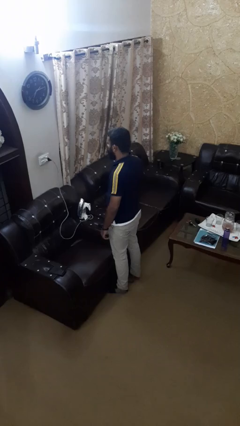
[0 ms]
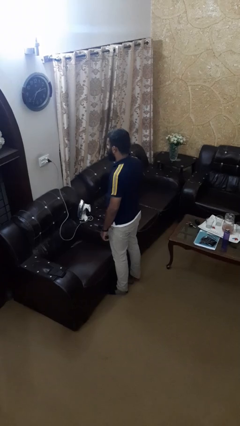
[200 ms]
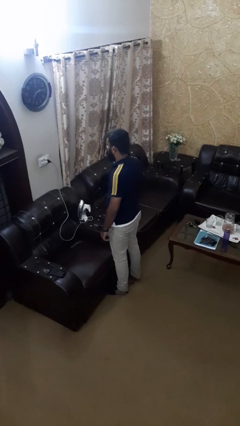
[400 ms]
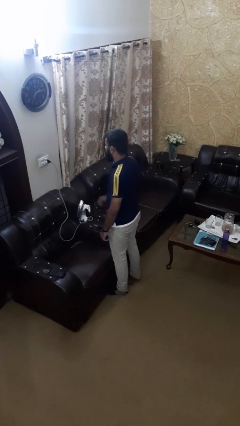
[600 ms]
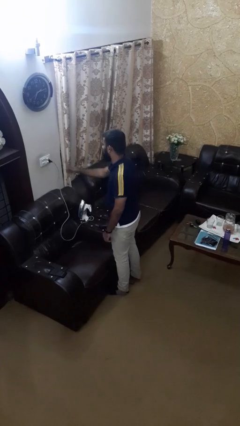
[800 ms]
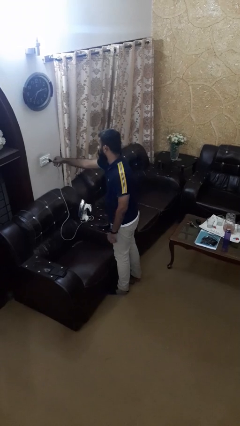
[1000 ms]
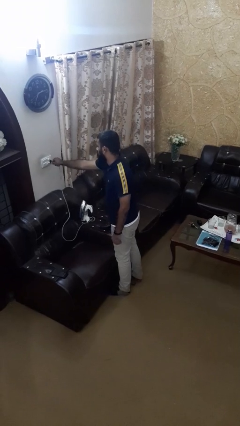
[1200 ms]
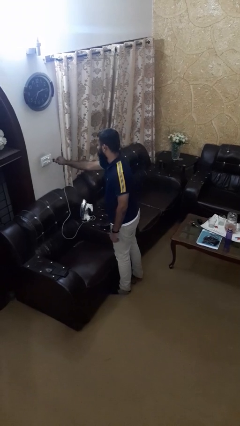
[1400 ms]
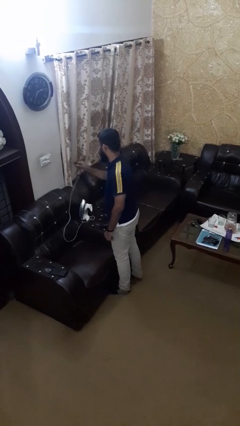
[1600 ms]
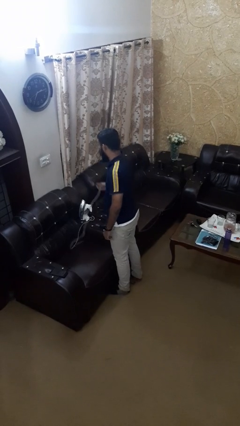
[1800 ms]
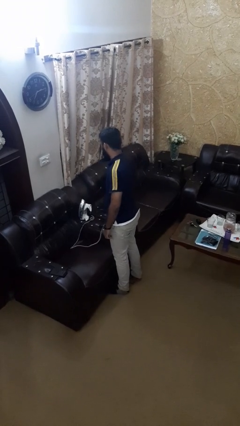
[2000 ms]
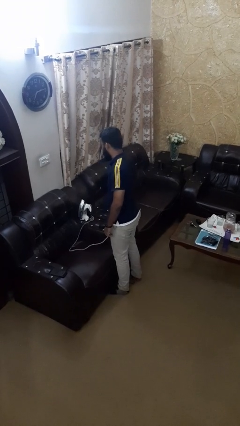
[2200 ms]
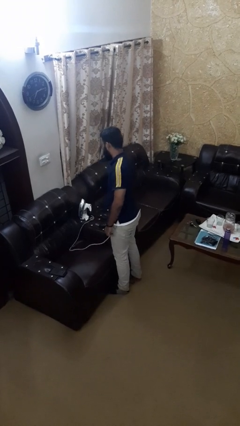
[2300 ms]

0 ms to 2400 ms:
person unplugs from electrical socket

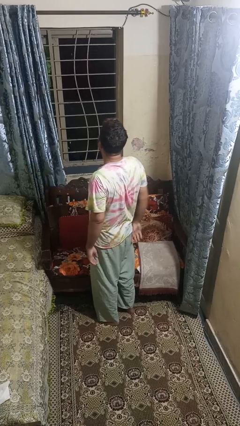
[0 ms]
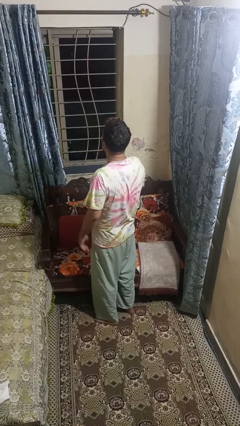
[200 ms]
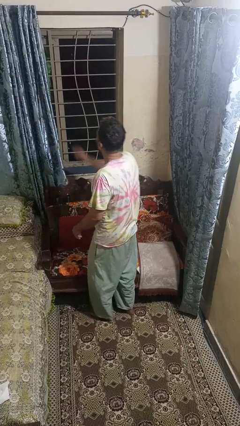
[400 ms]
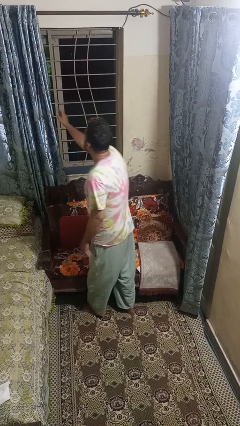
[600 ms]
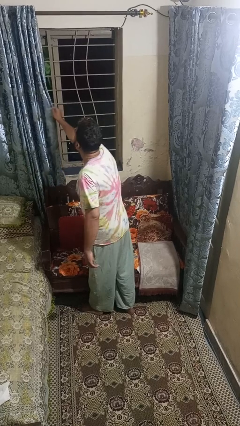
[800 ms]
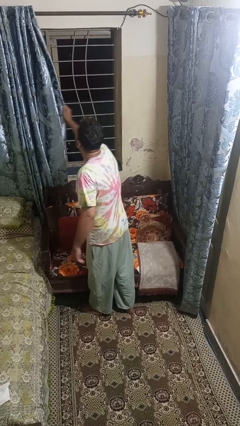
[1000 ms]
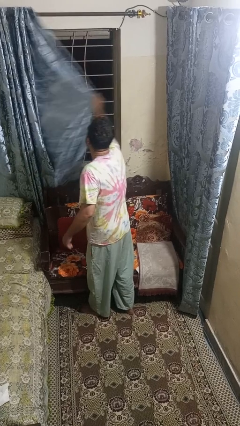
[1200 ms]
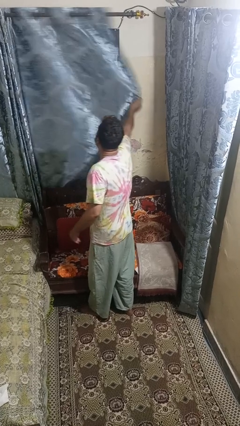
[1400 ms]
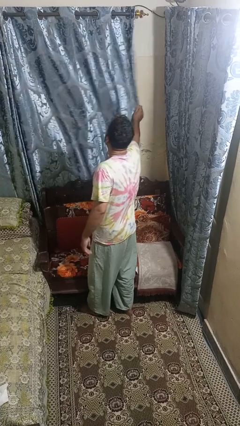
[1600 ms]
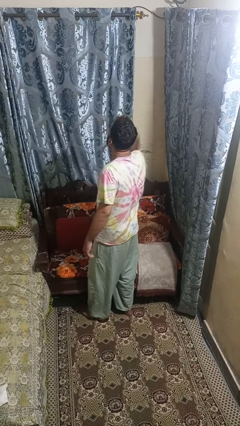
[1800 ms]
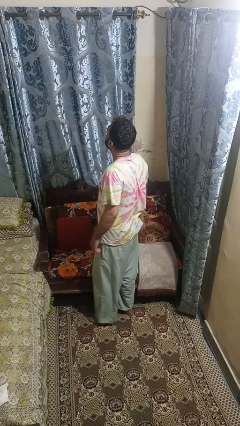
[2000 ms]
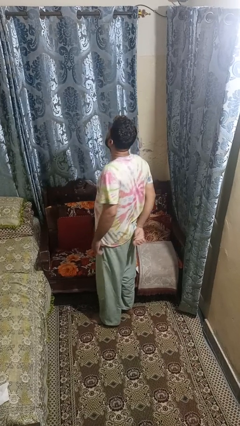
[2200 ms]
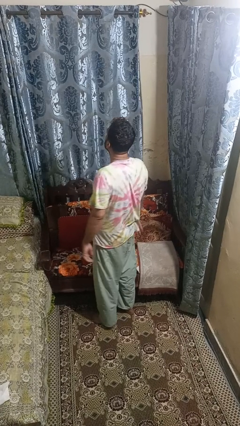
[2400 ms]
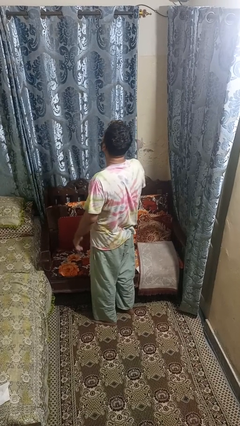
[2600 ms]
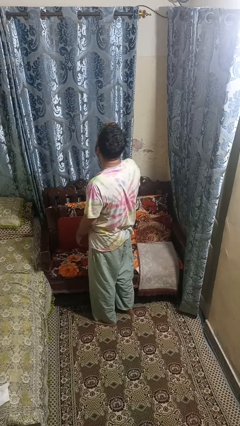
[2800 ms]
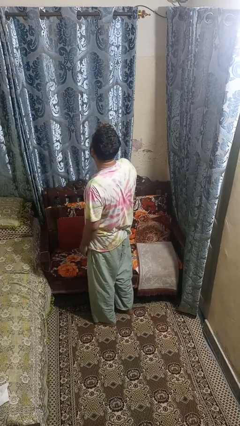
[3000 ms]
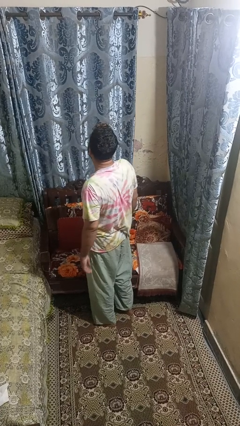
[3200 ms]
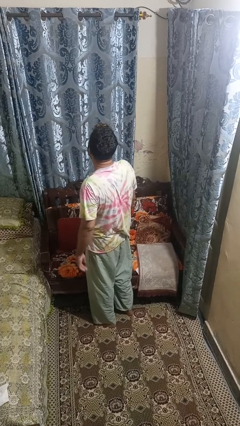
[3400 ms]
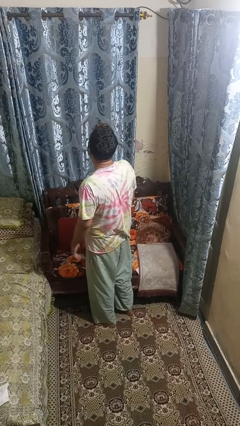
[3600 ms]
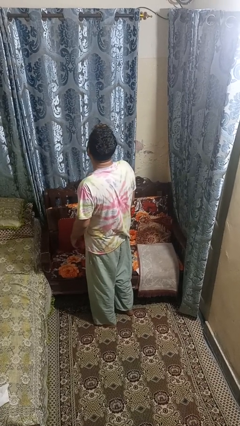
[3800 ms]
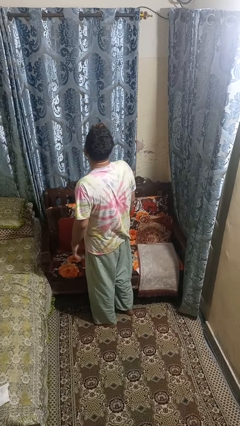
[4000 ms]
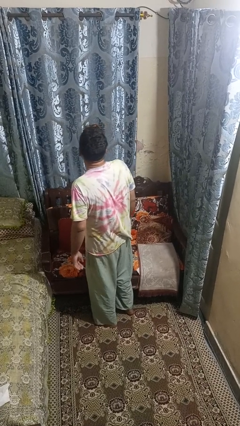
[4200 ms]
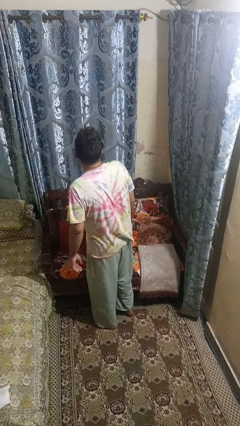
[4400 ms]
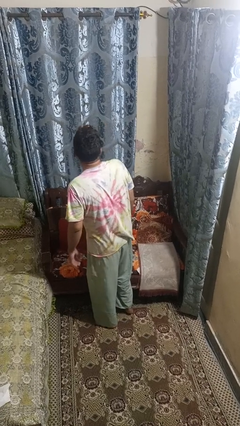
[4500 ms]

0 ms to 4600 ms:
person closes curtains

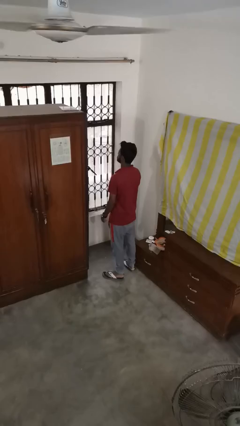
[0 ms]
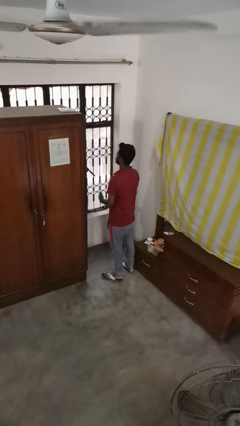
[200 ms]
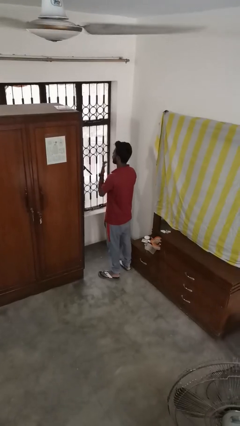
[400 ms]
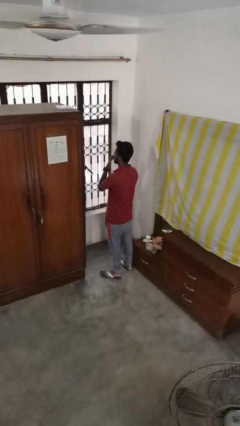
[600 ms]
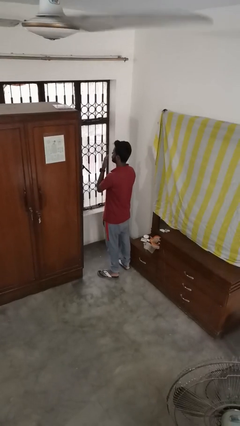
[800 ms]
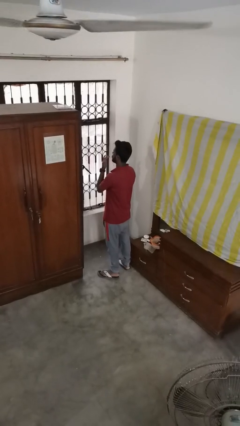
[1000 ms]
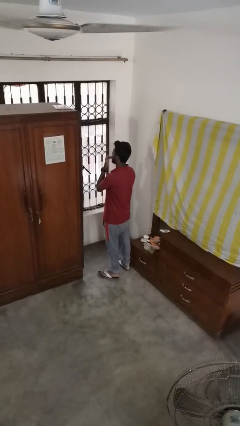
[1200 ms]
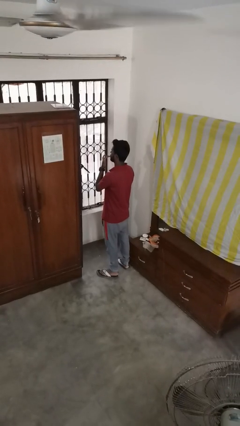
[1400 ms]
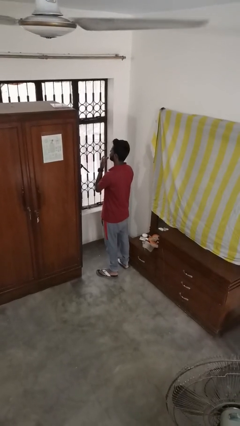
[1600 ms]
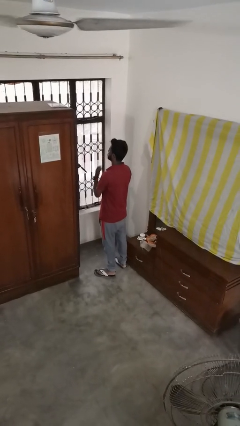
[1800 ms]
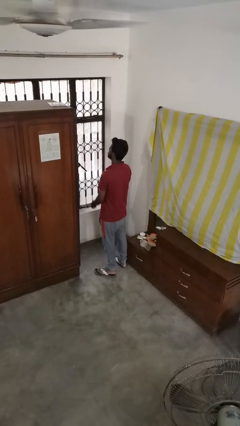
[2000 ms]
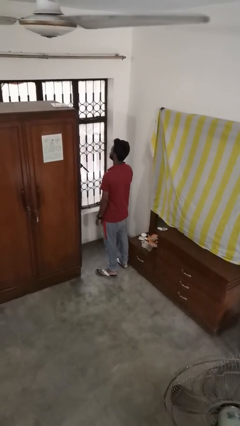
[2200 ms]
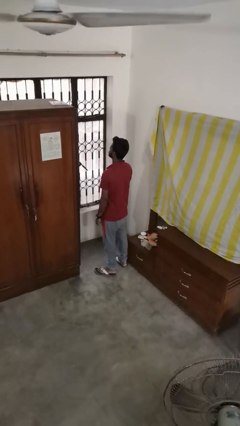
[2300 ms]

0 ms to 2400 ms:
person licks fingers

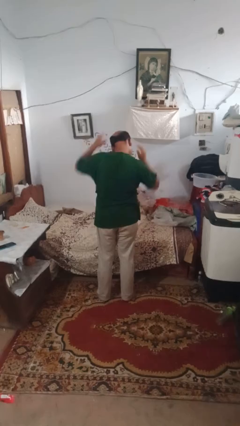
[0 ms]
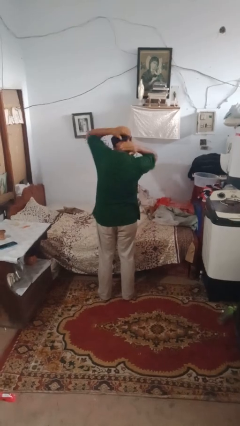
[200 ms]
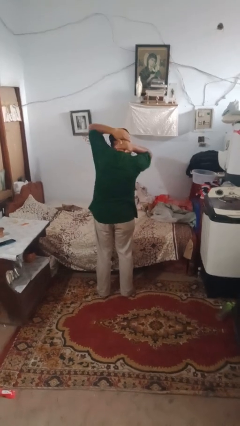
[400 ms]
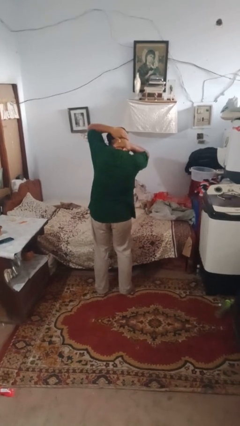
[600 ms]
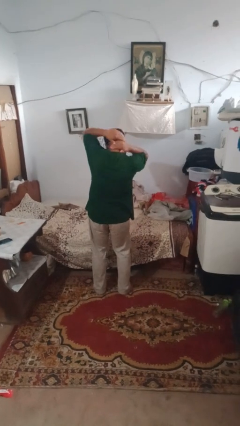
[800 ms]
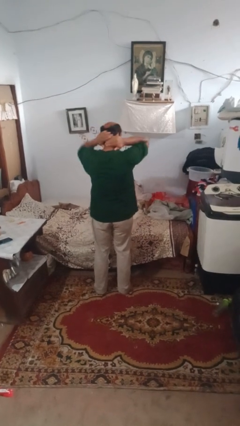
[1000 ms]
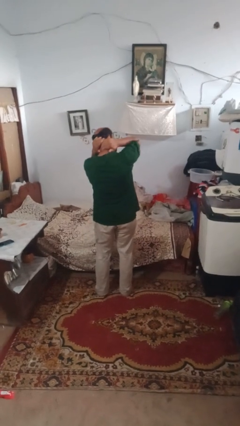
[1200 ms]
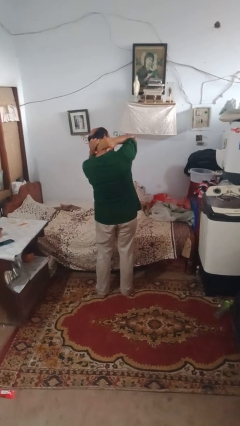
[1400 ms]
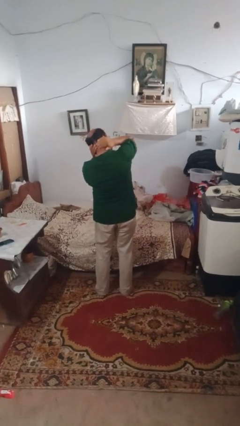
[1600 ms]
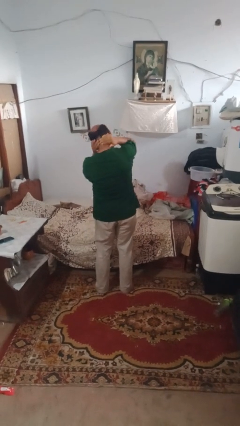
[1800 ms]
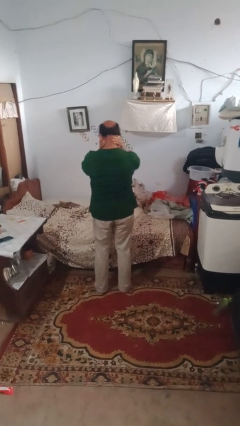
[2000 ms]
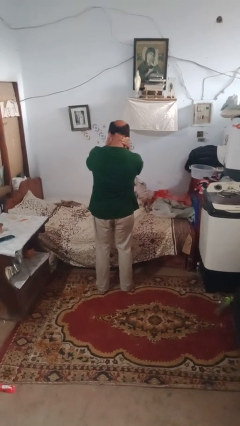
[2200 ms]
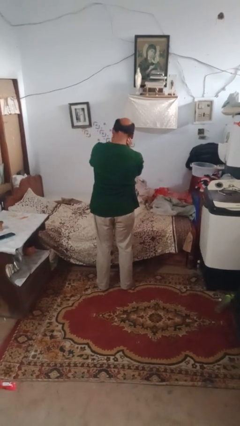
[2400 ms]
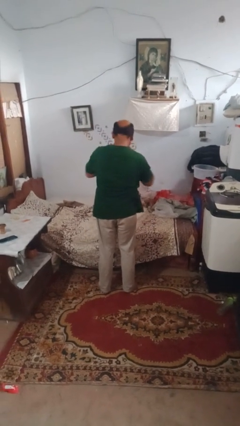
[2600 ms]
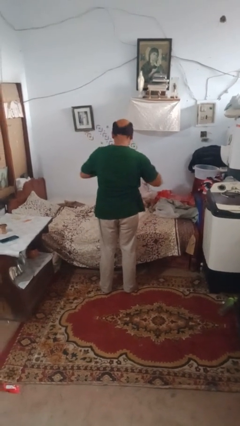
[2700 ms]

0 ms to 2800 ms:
person rubs neck

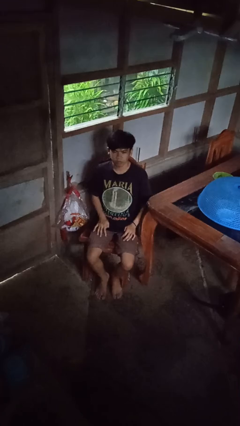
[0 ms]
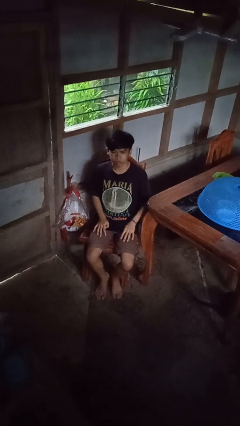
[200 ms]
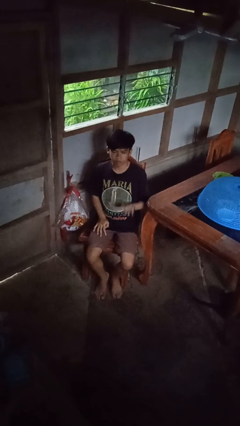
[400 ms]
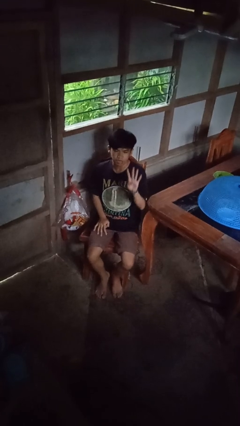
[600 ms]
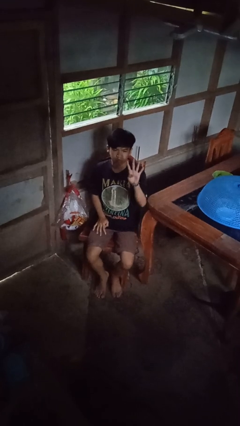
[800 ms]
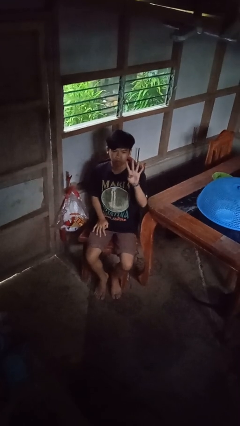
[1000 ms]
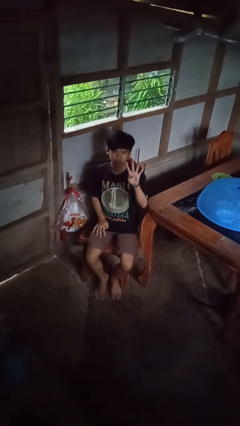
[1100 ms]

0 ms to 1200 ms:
person gestures number four

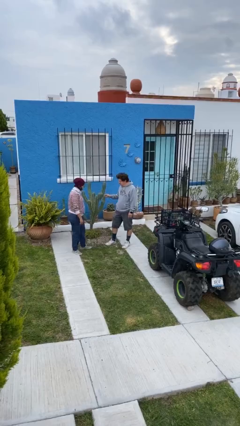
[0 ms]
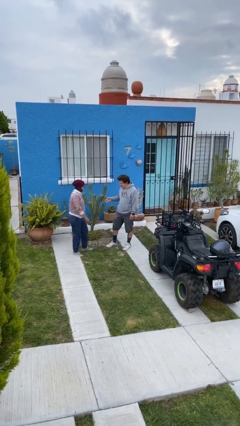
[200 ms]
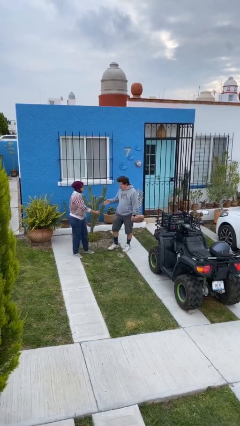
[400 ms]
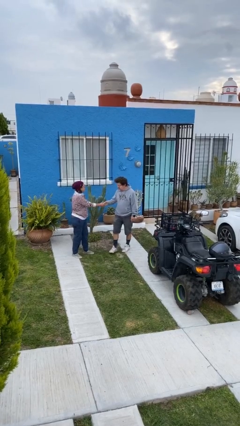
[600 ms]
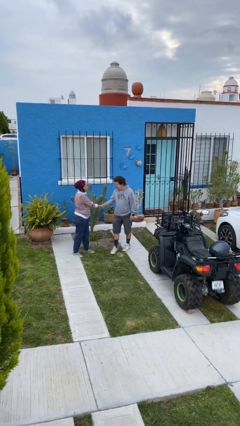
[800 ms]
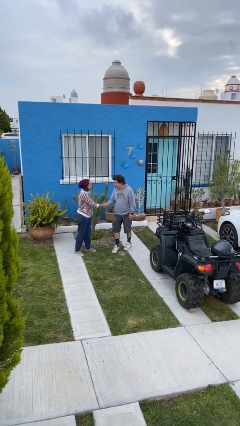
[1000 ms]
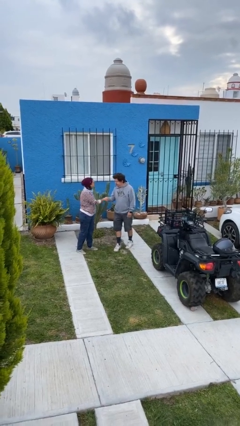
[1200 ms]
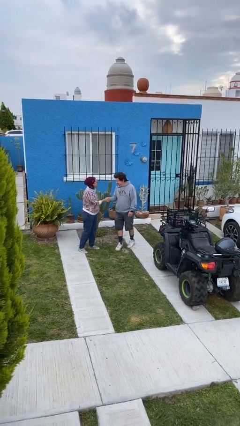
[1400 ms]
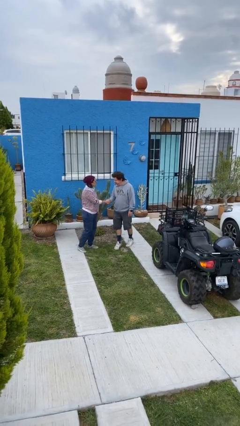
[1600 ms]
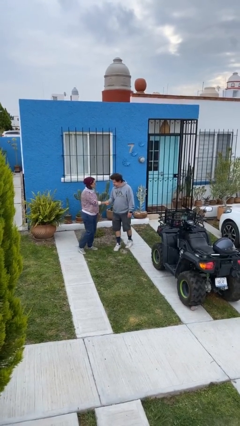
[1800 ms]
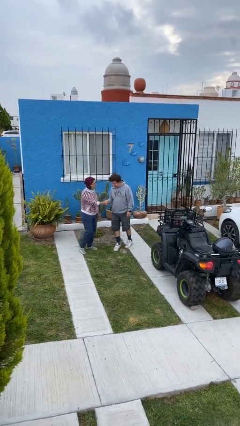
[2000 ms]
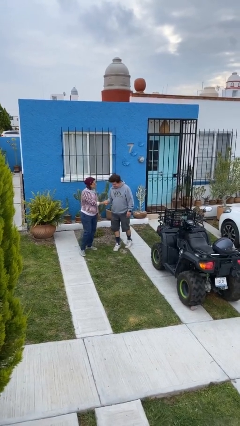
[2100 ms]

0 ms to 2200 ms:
person shakes hand

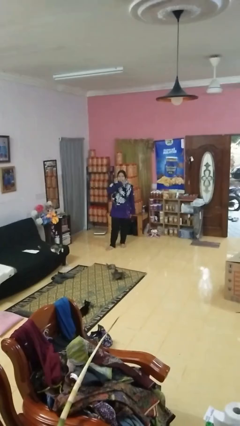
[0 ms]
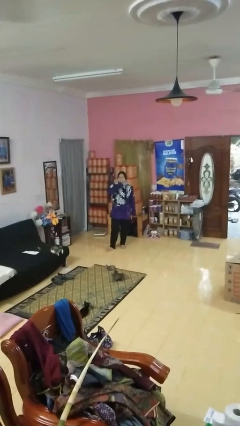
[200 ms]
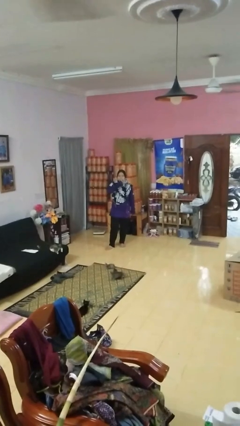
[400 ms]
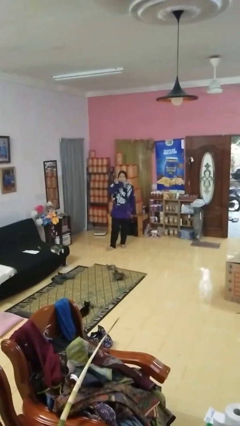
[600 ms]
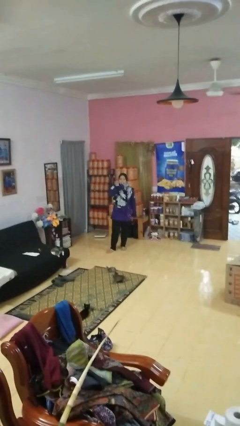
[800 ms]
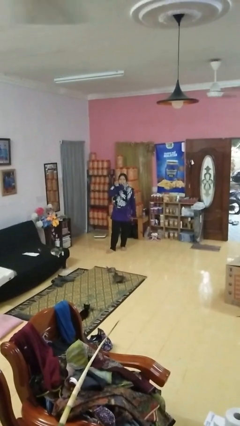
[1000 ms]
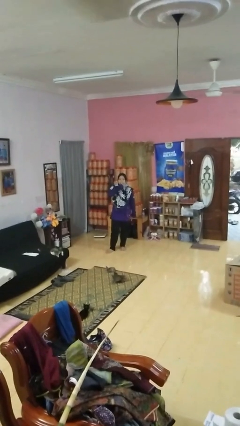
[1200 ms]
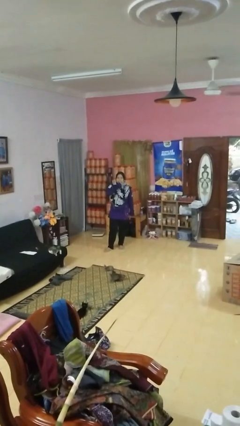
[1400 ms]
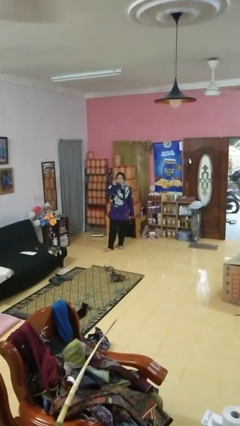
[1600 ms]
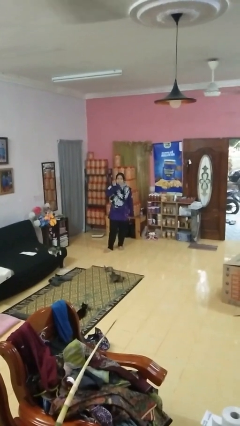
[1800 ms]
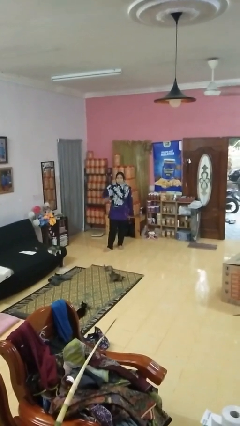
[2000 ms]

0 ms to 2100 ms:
person gestures be quiet
